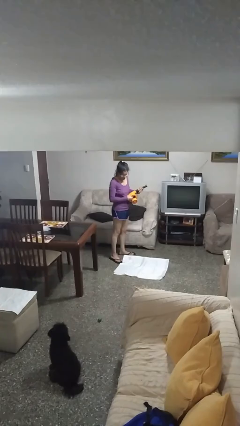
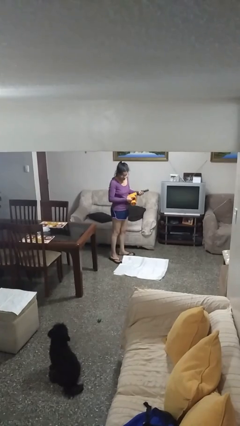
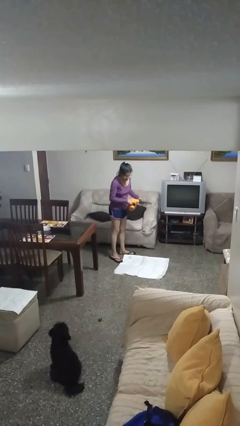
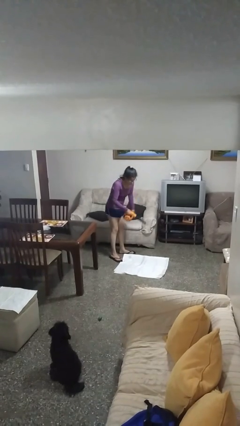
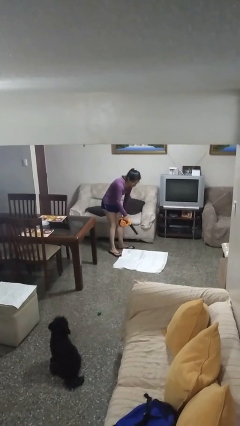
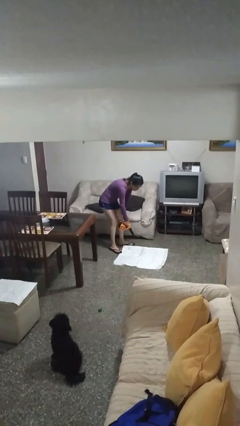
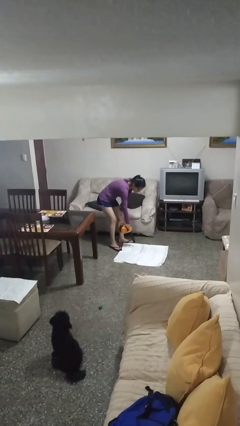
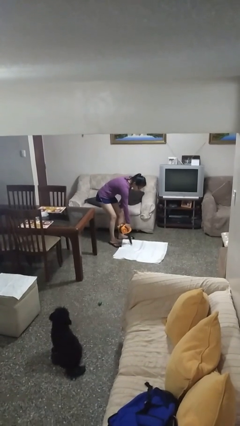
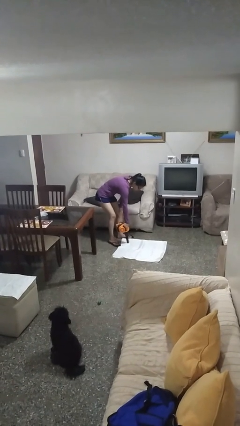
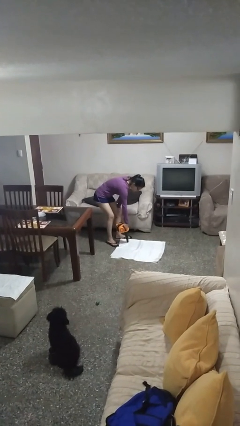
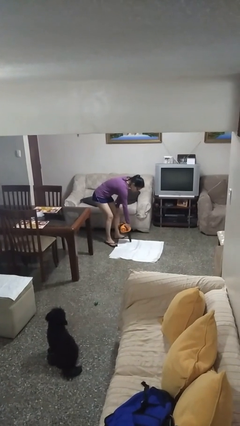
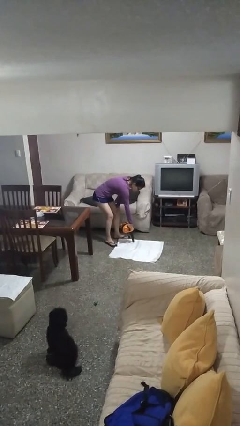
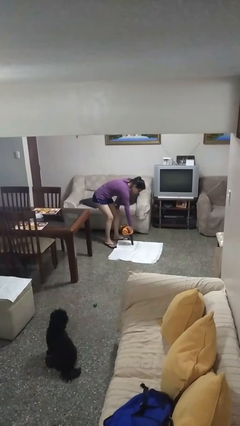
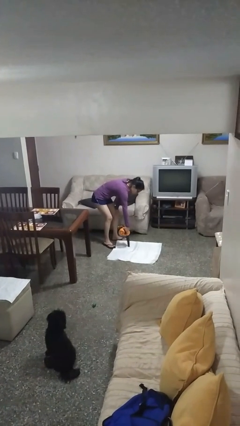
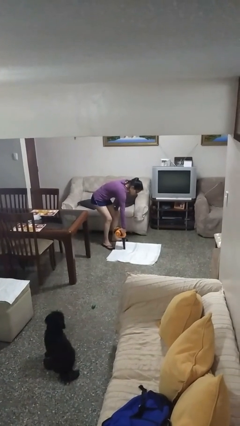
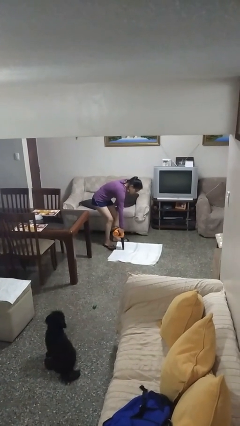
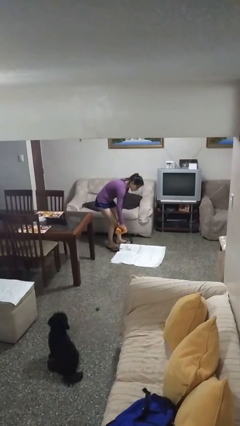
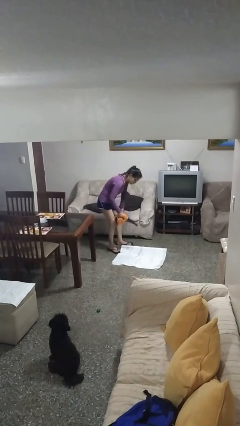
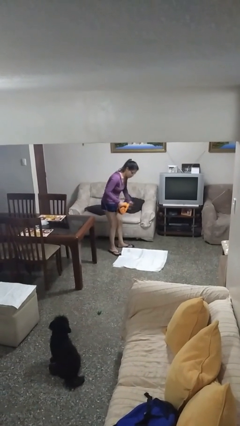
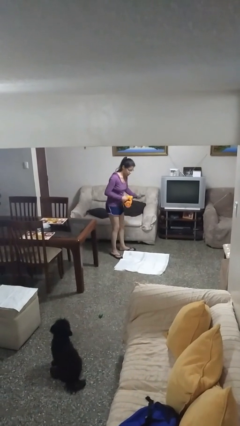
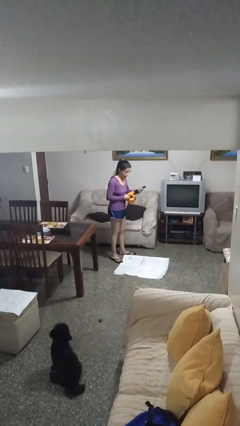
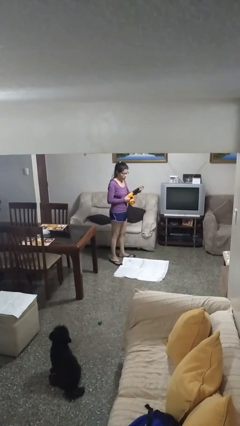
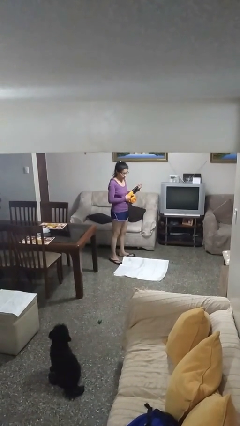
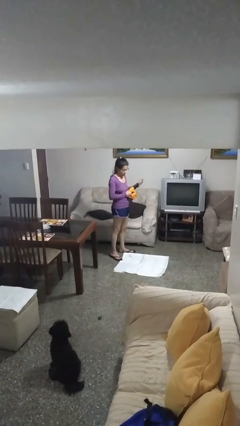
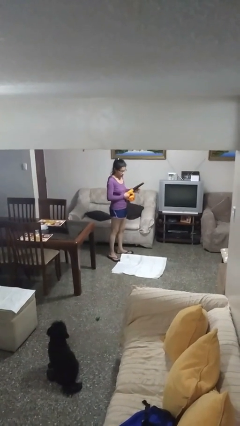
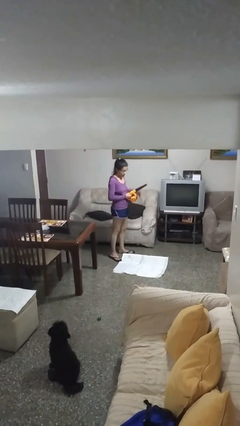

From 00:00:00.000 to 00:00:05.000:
person vacuums carpet

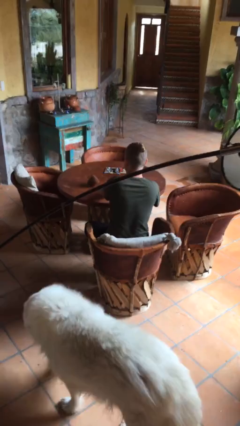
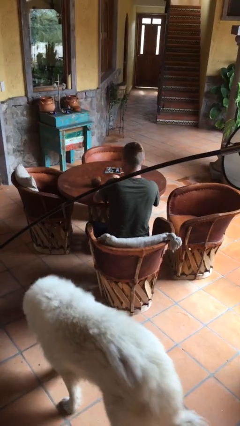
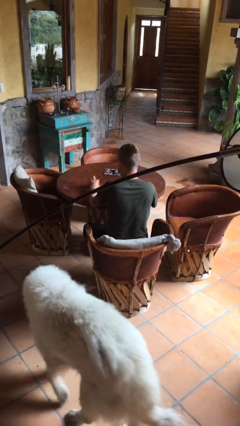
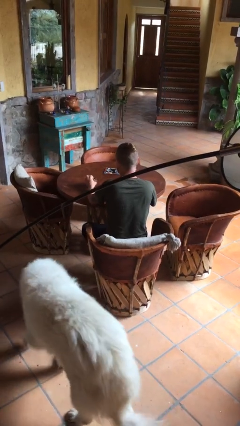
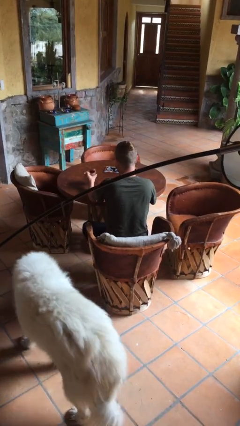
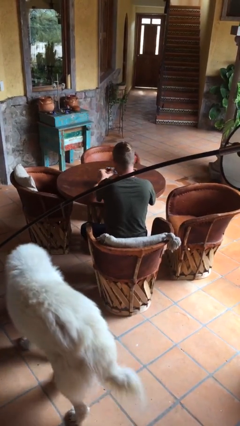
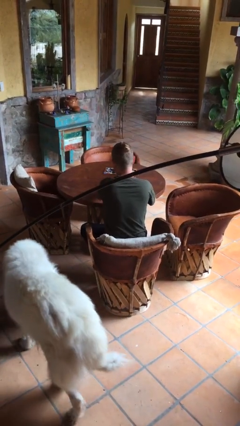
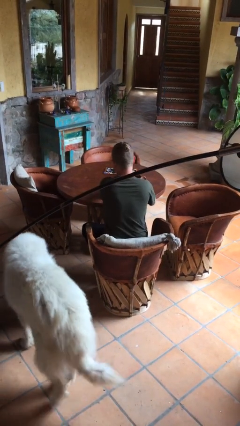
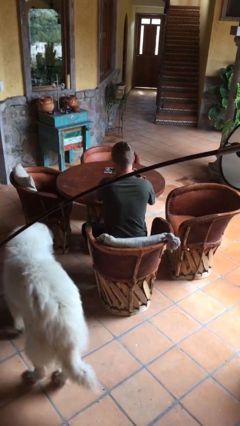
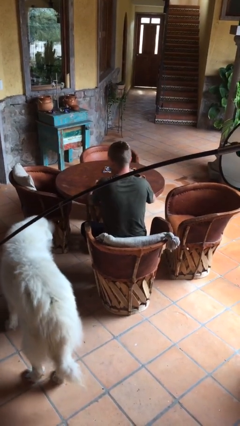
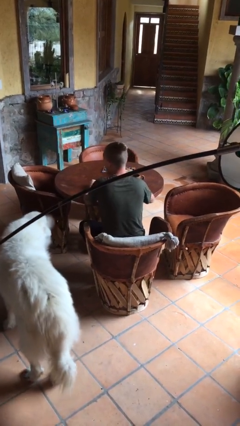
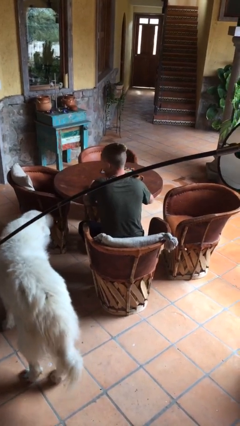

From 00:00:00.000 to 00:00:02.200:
person sets upright glass

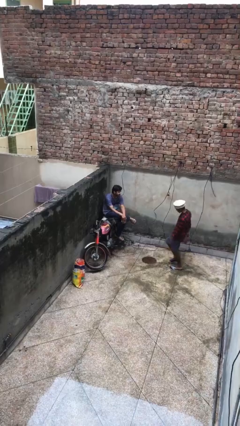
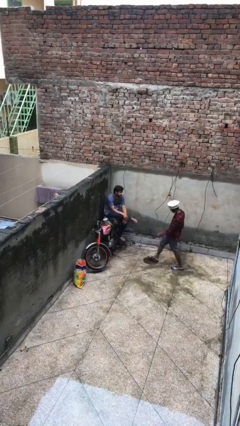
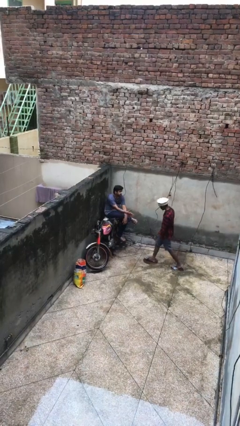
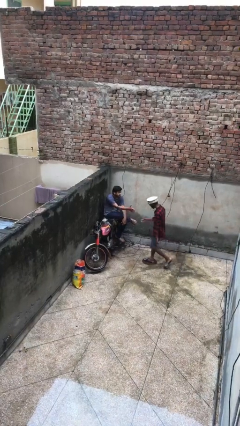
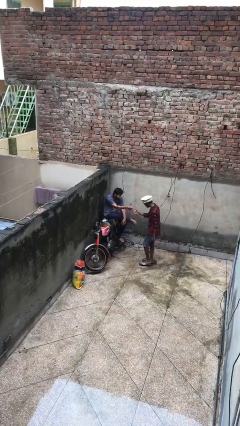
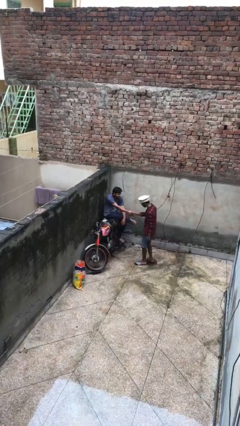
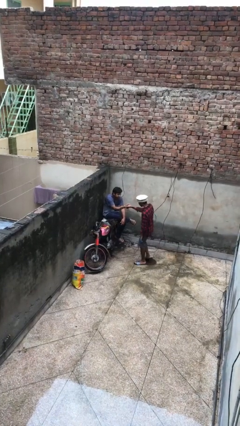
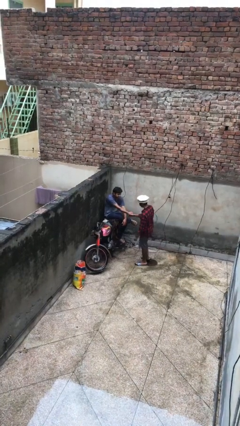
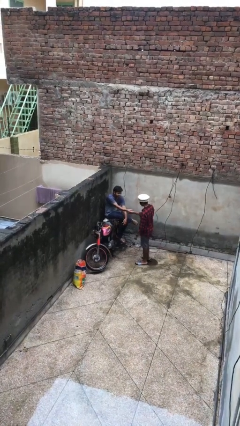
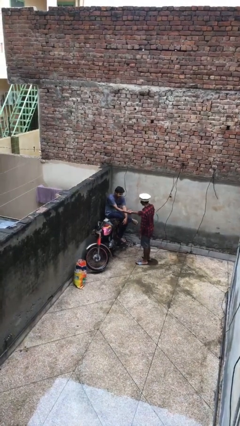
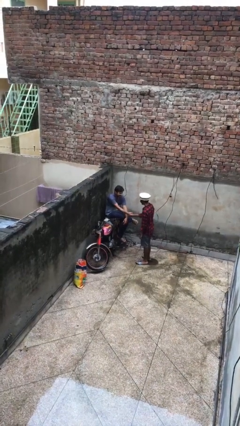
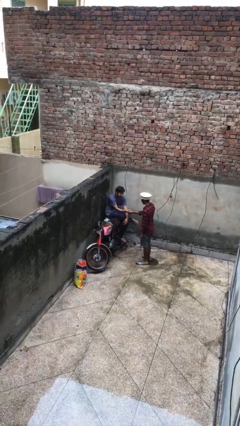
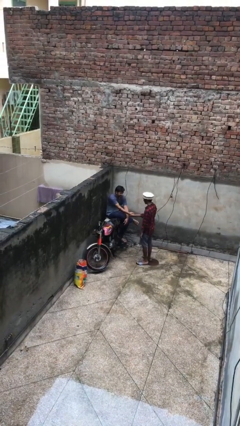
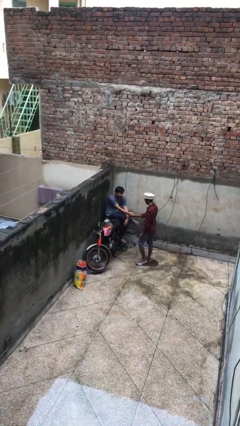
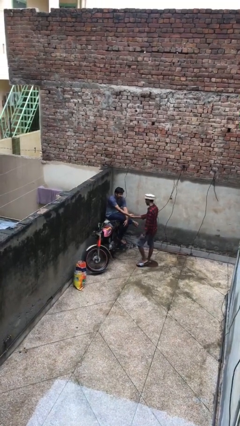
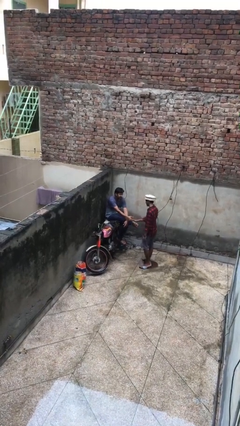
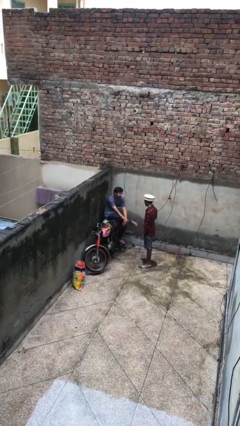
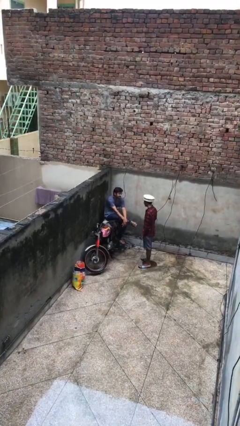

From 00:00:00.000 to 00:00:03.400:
person shakes hand

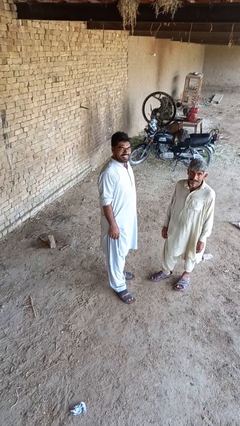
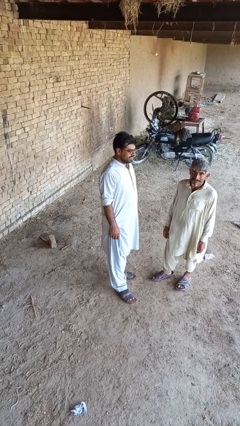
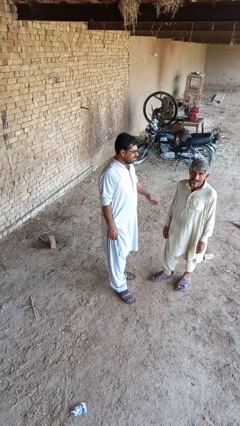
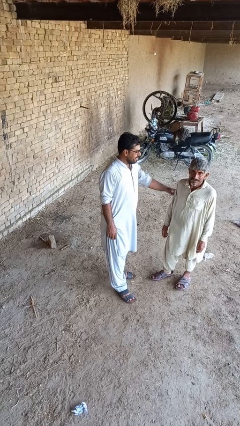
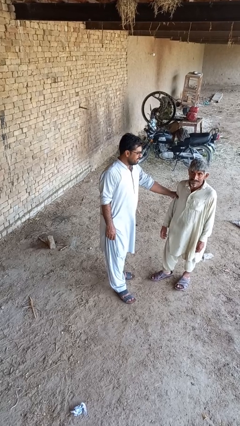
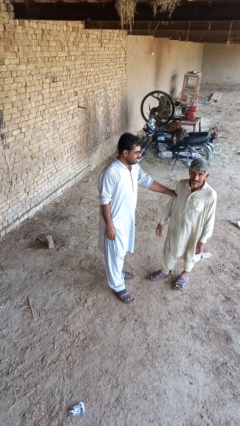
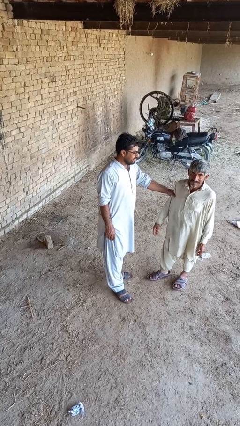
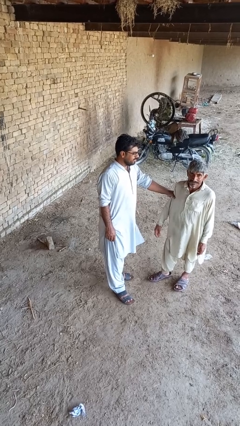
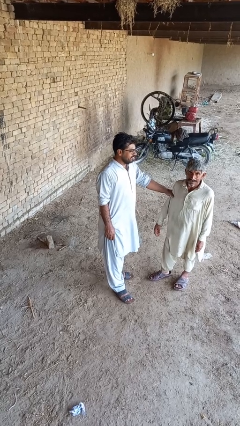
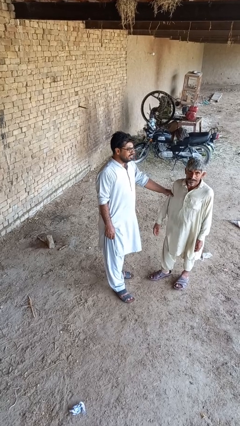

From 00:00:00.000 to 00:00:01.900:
person grabs person by bicep

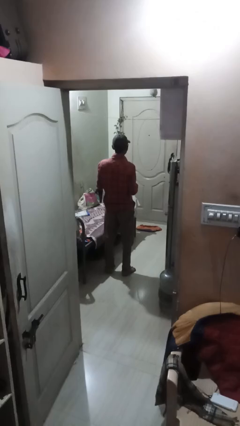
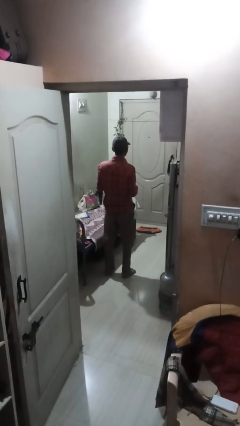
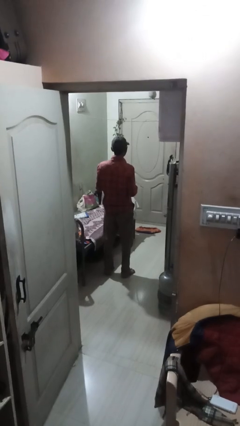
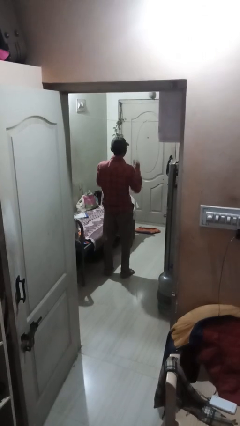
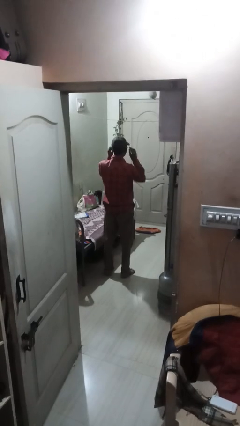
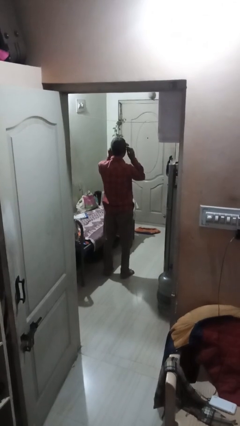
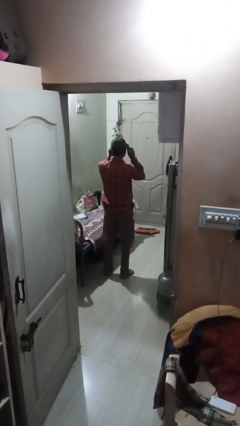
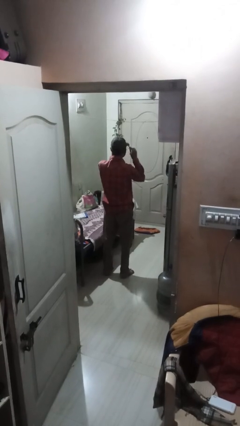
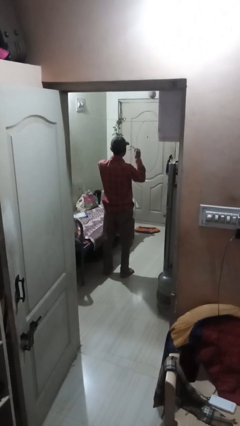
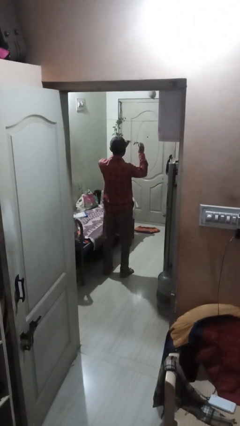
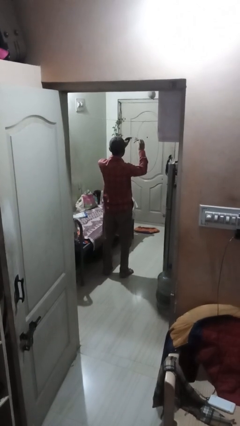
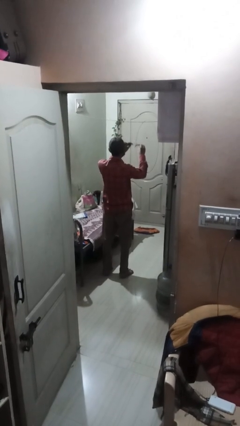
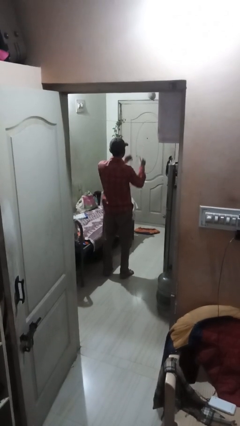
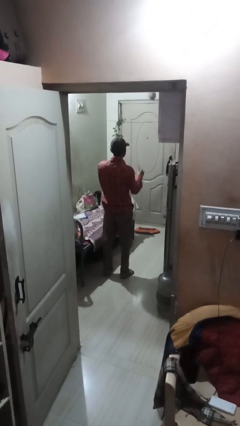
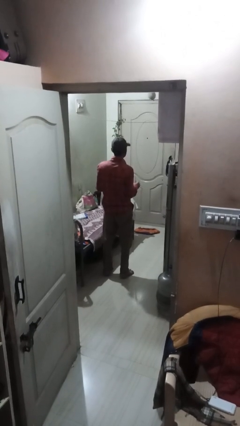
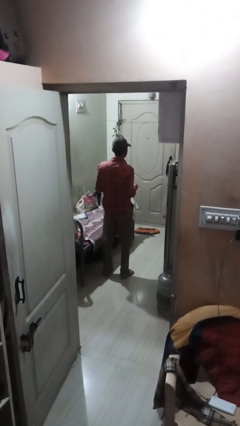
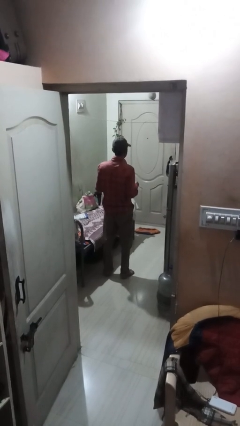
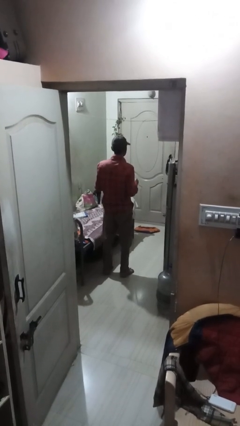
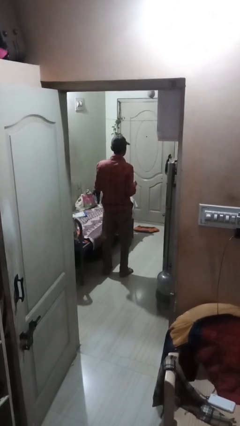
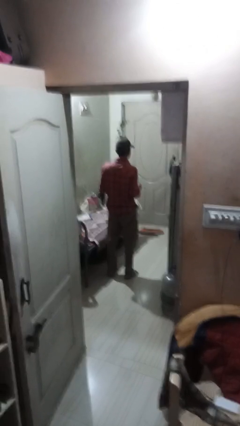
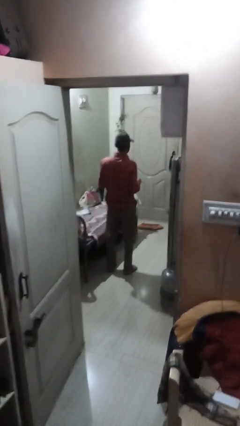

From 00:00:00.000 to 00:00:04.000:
person takes off glasses

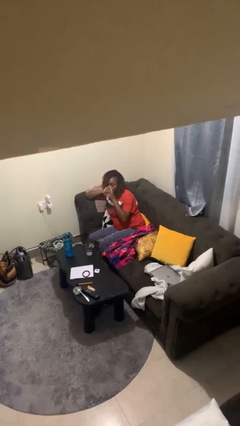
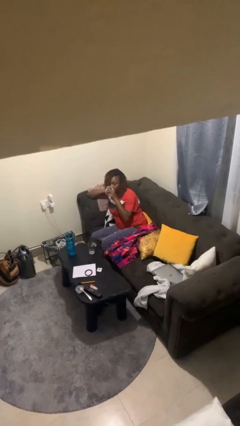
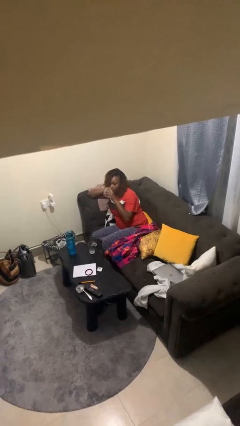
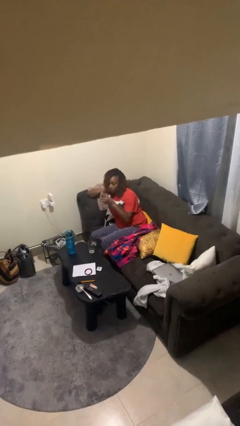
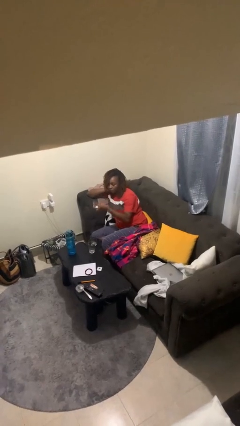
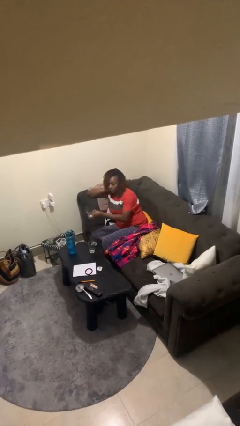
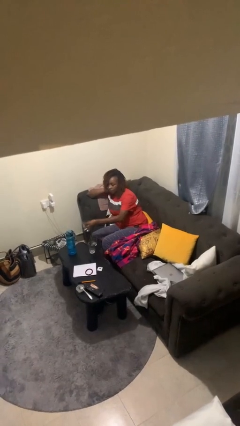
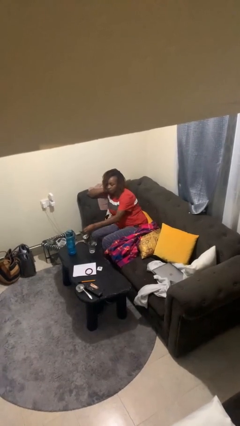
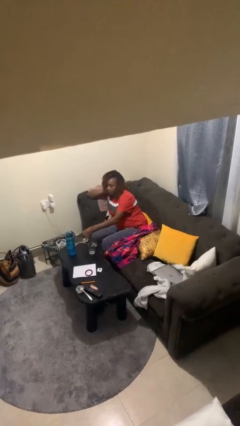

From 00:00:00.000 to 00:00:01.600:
person puts down object on table
